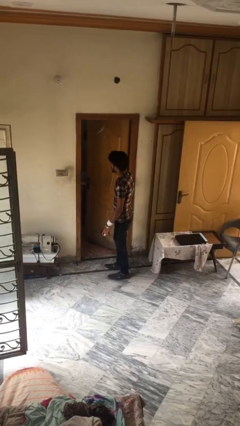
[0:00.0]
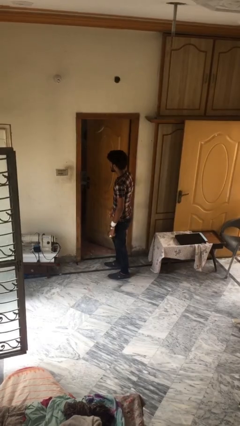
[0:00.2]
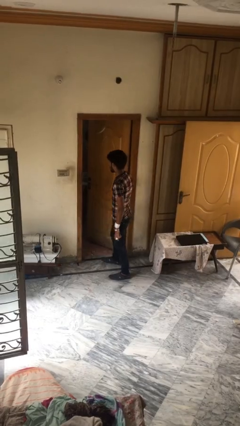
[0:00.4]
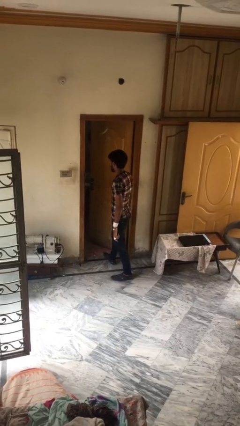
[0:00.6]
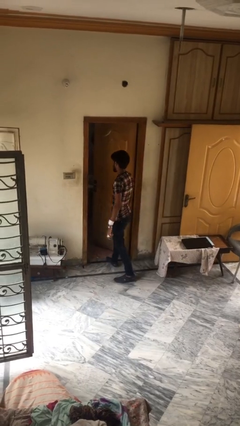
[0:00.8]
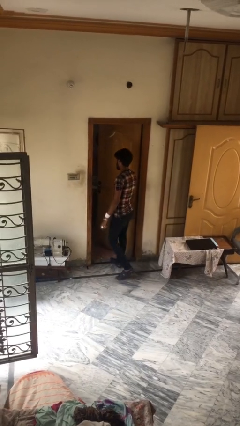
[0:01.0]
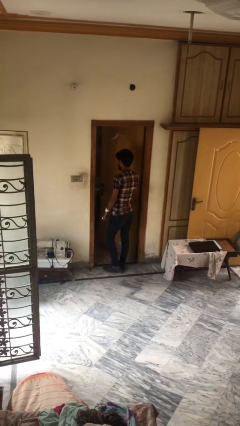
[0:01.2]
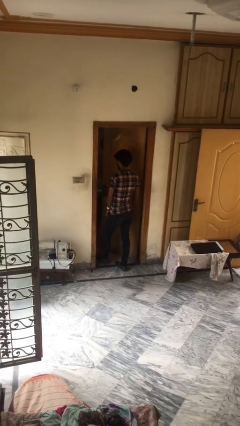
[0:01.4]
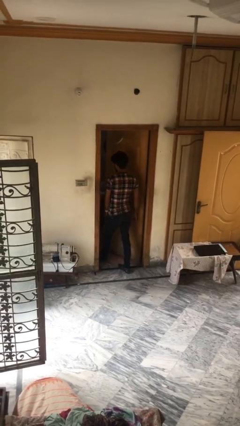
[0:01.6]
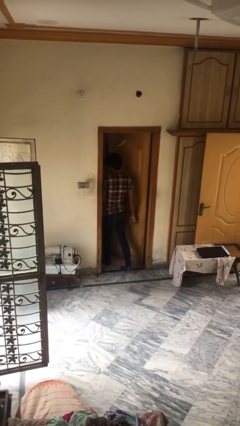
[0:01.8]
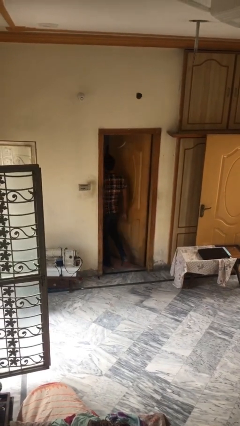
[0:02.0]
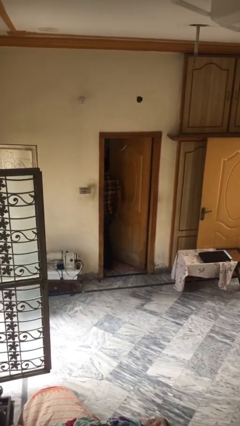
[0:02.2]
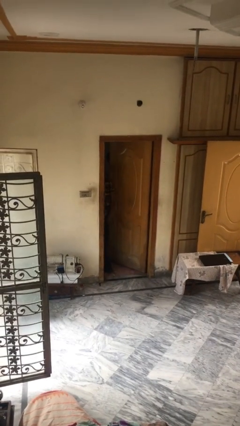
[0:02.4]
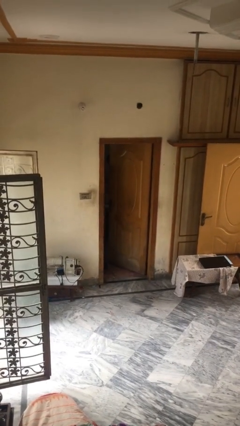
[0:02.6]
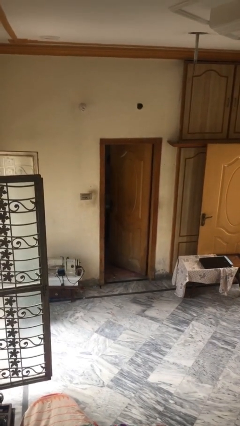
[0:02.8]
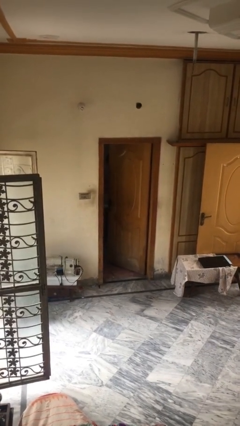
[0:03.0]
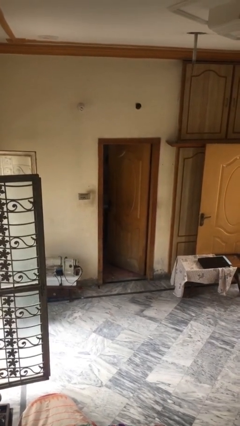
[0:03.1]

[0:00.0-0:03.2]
person exits scene through structure

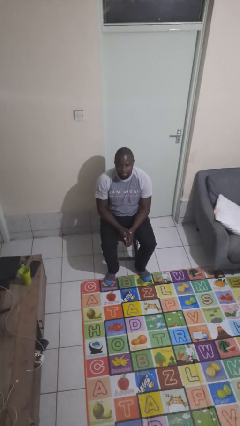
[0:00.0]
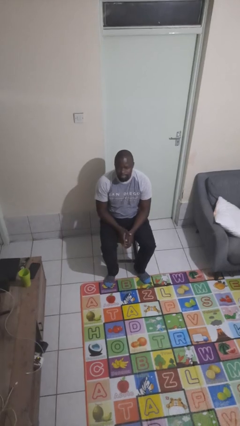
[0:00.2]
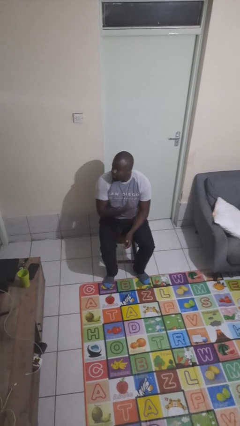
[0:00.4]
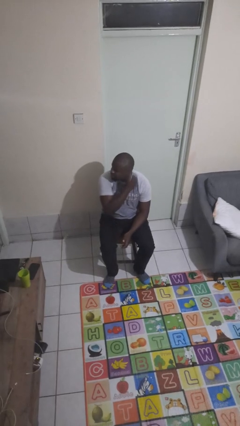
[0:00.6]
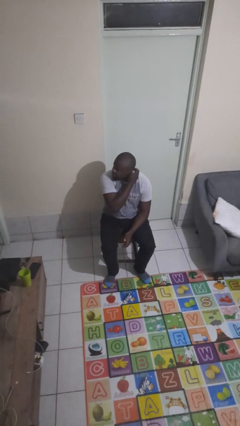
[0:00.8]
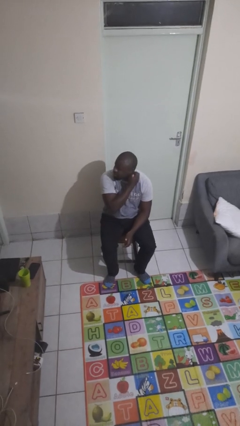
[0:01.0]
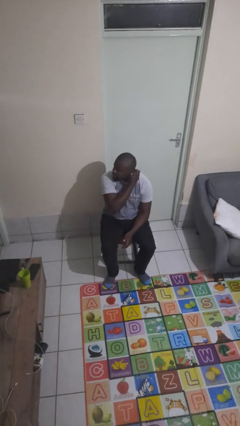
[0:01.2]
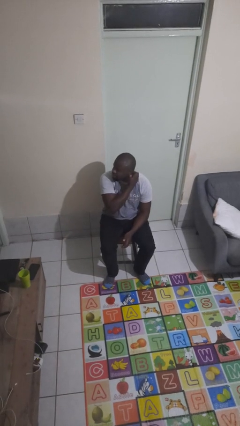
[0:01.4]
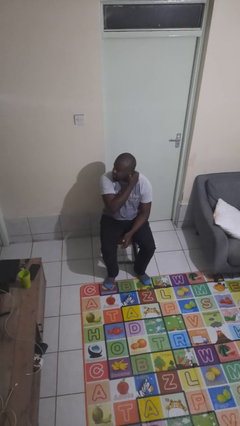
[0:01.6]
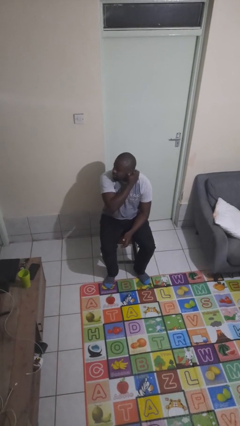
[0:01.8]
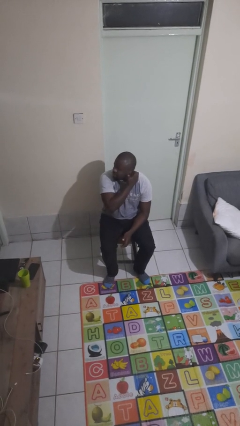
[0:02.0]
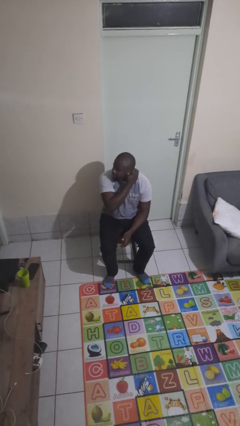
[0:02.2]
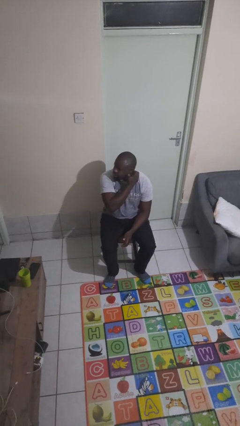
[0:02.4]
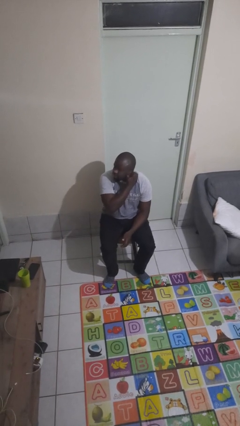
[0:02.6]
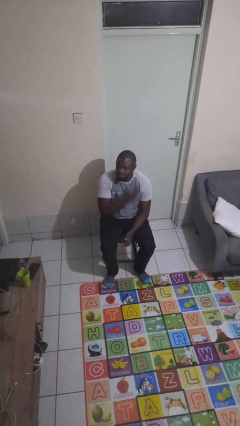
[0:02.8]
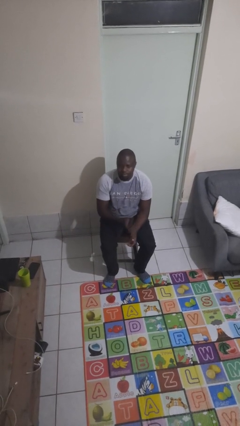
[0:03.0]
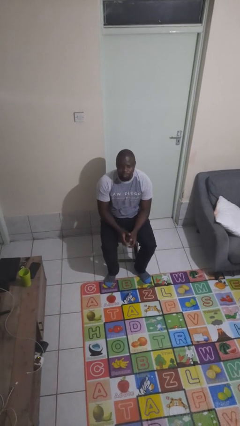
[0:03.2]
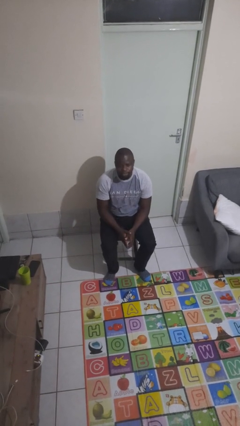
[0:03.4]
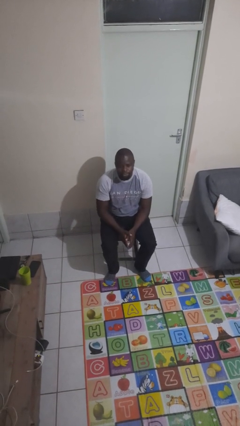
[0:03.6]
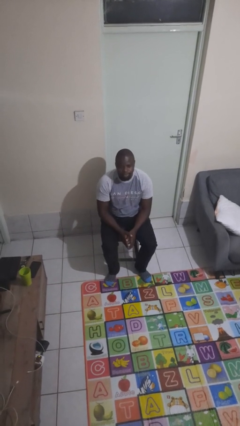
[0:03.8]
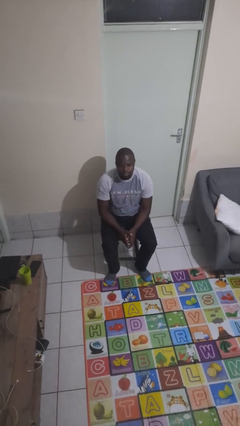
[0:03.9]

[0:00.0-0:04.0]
person scratches face

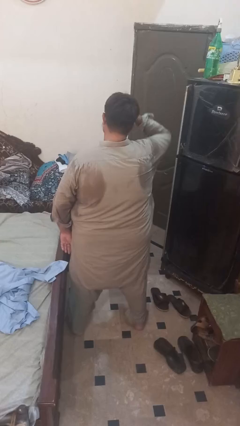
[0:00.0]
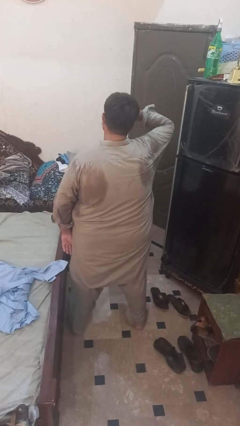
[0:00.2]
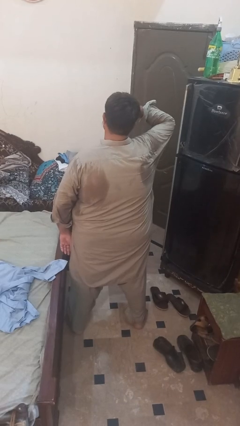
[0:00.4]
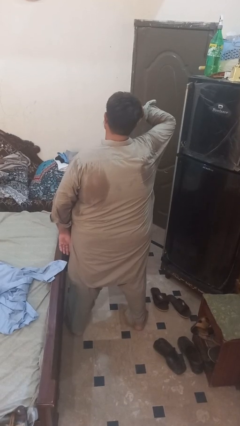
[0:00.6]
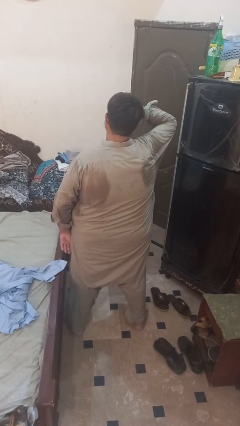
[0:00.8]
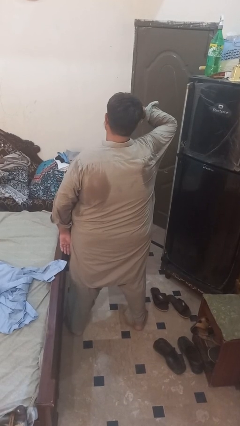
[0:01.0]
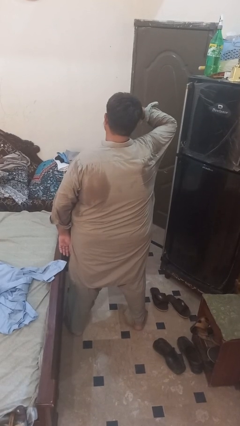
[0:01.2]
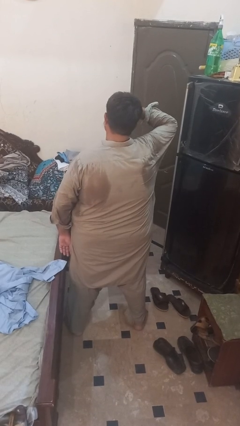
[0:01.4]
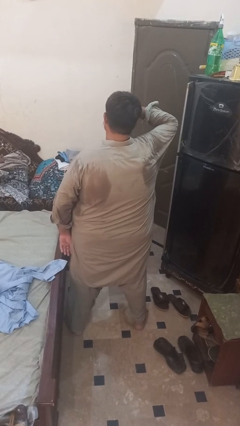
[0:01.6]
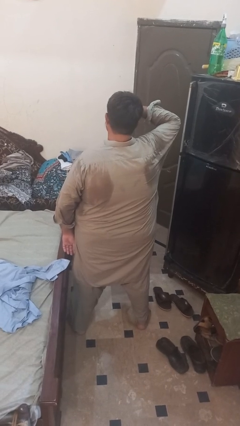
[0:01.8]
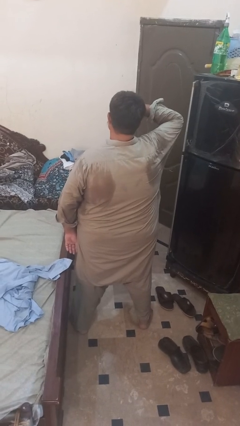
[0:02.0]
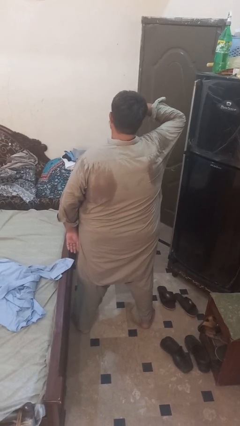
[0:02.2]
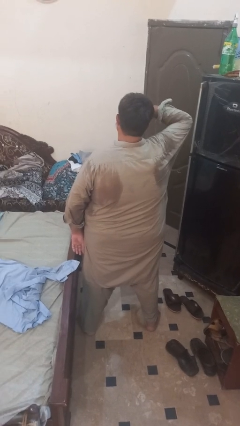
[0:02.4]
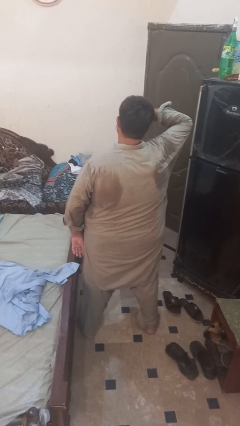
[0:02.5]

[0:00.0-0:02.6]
person shades eyes

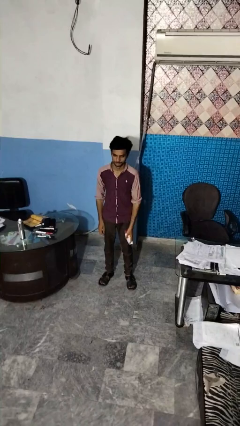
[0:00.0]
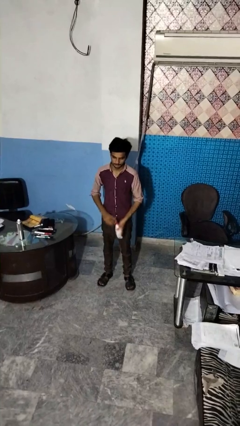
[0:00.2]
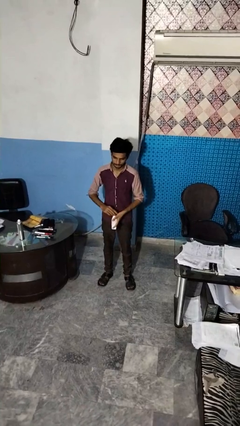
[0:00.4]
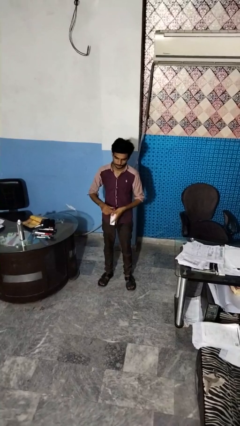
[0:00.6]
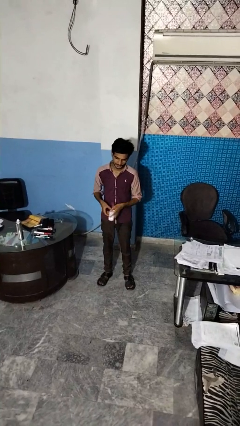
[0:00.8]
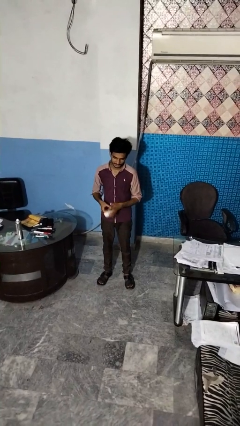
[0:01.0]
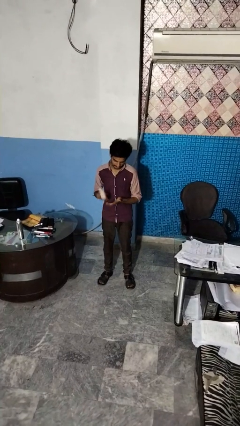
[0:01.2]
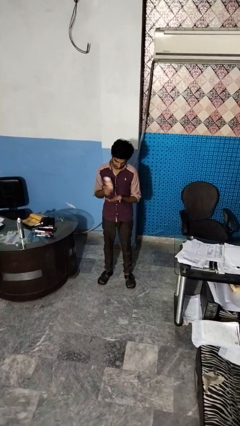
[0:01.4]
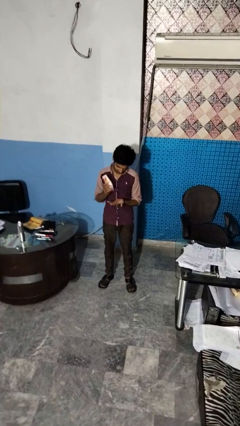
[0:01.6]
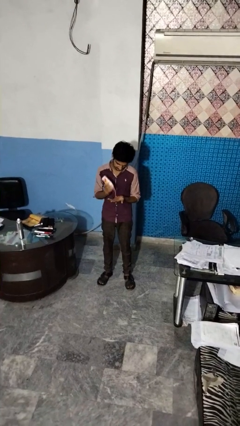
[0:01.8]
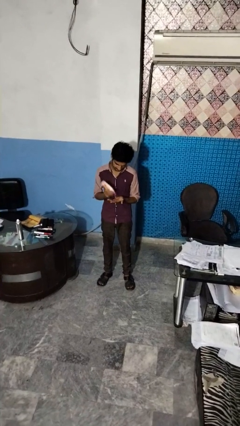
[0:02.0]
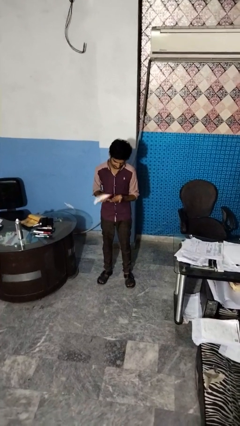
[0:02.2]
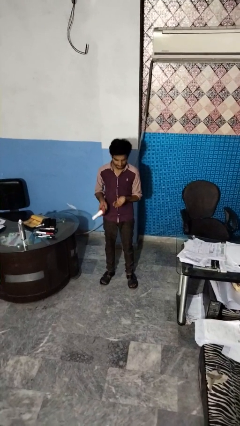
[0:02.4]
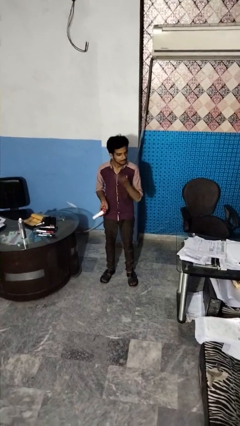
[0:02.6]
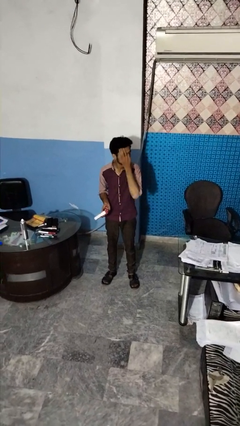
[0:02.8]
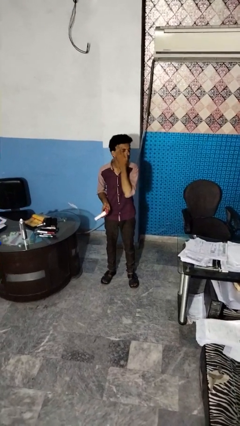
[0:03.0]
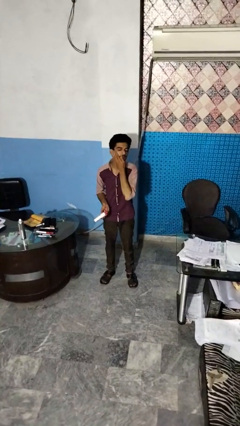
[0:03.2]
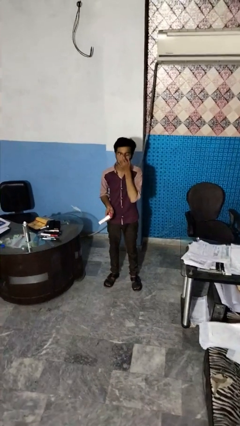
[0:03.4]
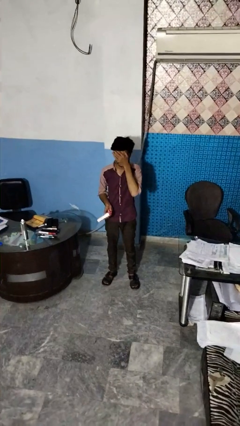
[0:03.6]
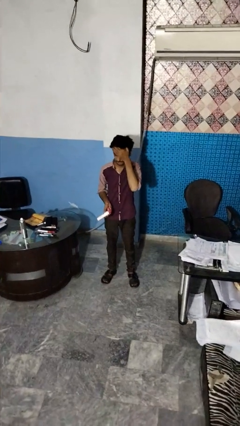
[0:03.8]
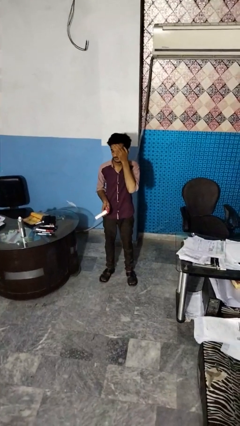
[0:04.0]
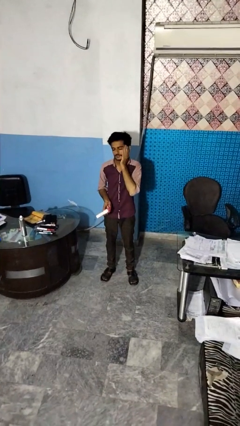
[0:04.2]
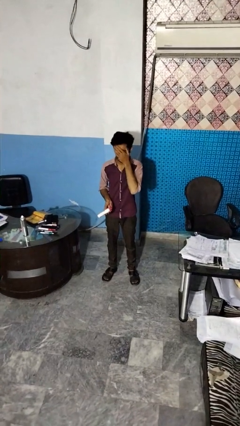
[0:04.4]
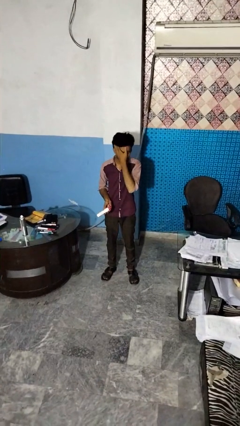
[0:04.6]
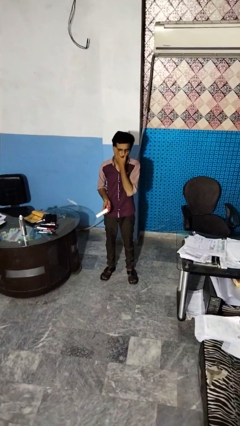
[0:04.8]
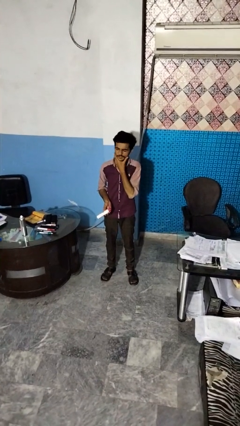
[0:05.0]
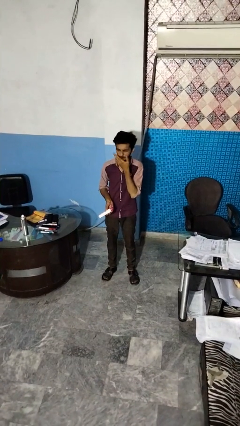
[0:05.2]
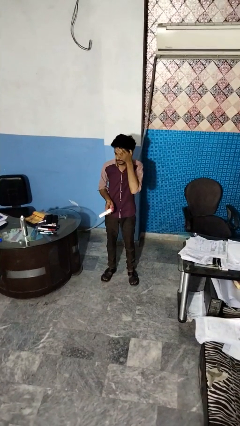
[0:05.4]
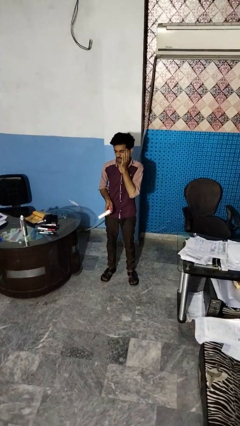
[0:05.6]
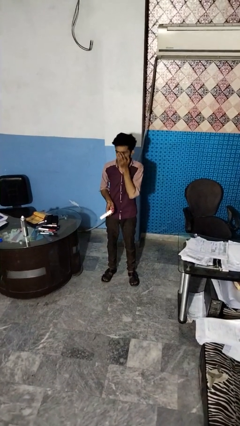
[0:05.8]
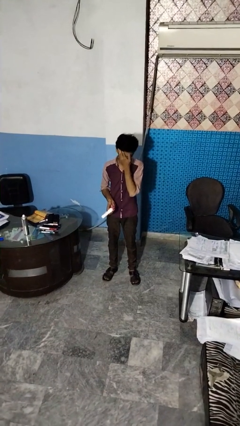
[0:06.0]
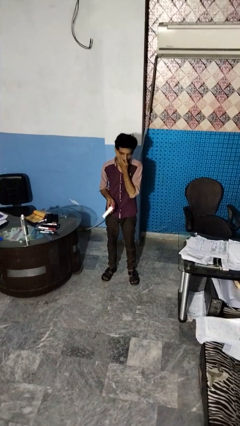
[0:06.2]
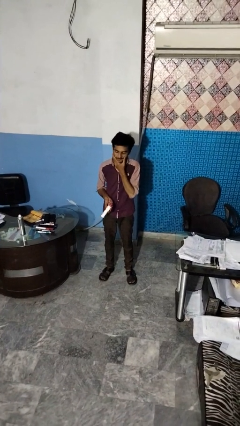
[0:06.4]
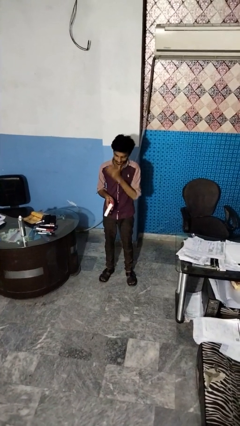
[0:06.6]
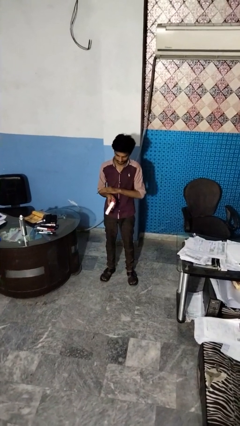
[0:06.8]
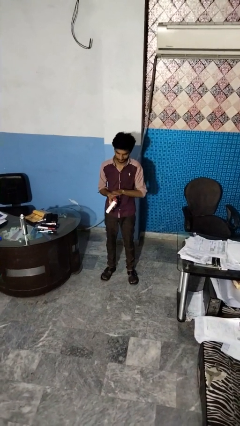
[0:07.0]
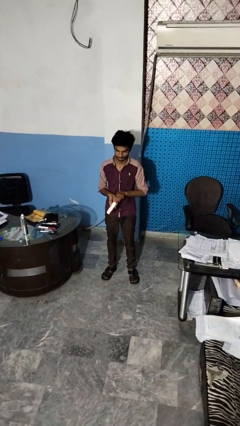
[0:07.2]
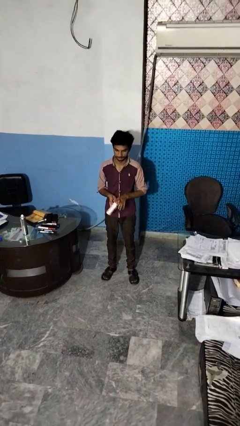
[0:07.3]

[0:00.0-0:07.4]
person applies facial moisturizer

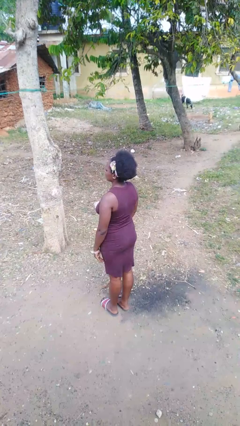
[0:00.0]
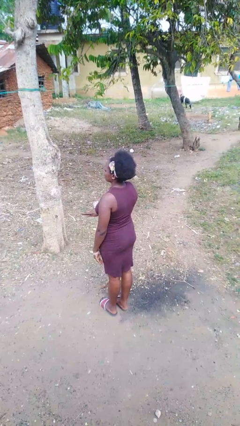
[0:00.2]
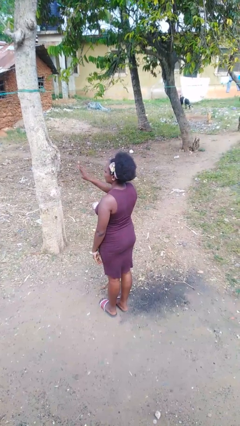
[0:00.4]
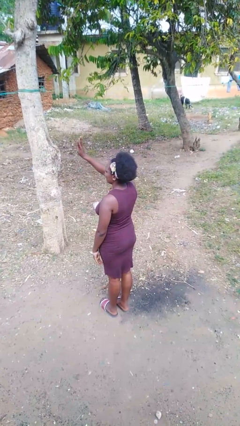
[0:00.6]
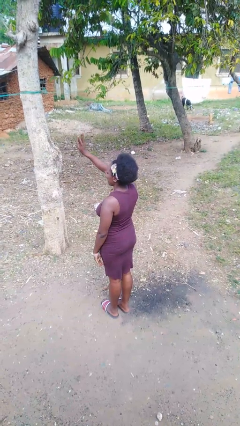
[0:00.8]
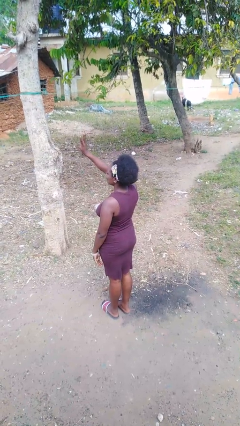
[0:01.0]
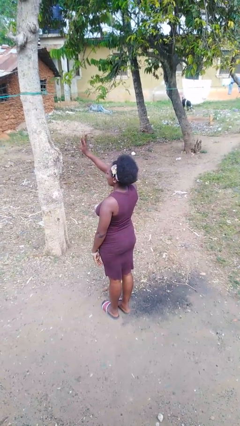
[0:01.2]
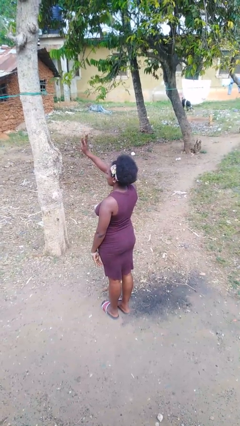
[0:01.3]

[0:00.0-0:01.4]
person gestures number four
